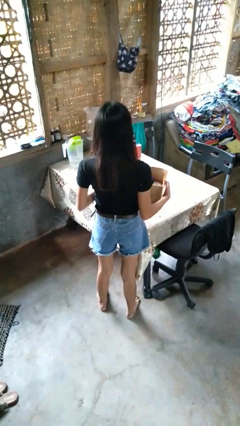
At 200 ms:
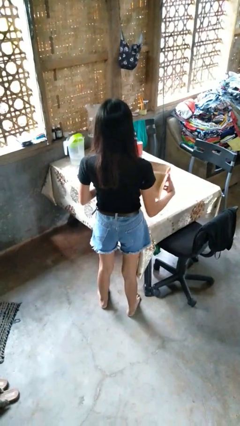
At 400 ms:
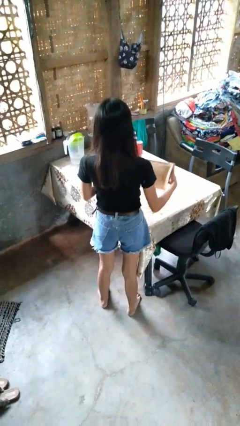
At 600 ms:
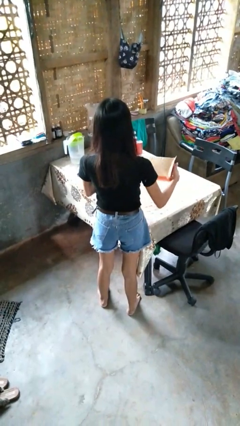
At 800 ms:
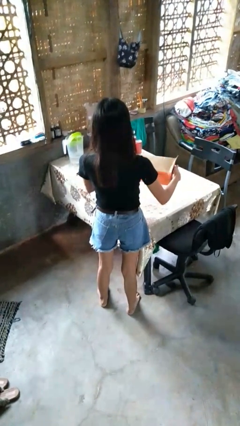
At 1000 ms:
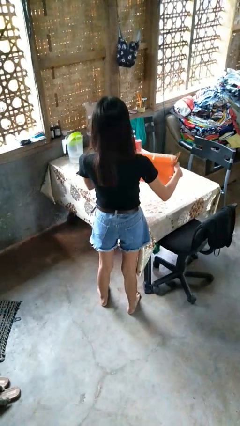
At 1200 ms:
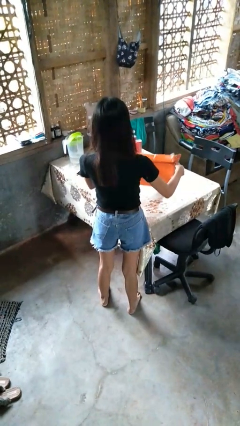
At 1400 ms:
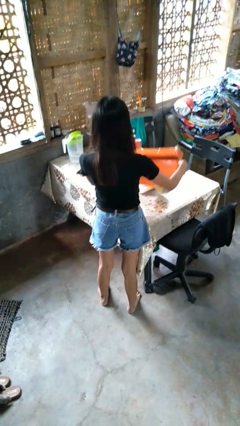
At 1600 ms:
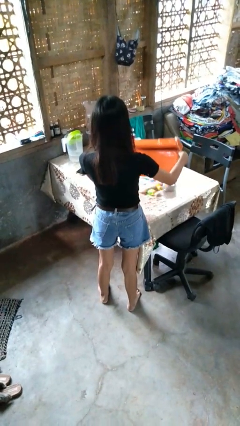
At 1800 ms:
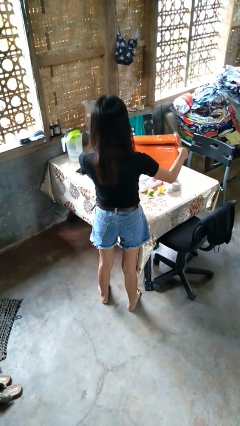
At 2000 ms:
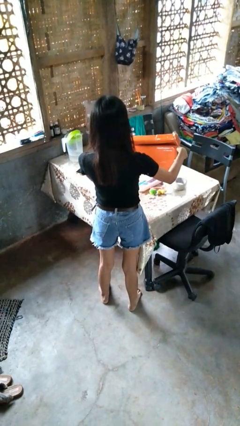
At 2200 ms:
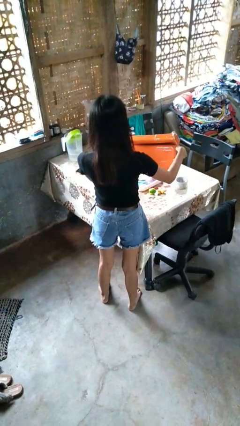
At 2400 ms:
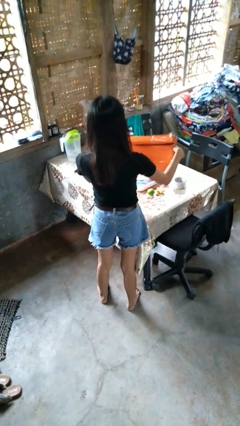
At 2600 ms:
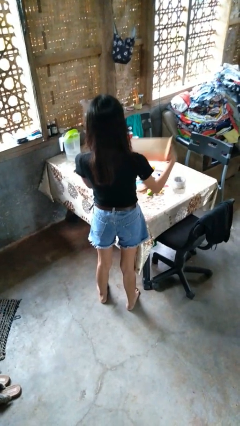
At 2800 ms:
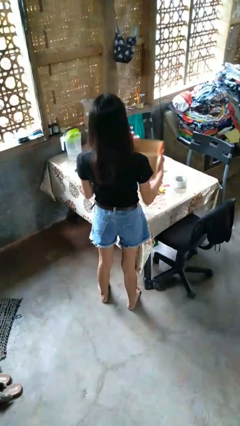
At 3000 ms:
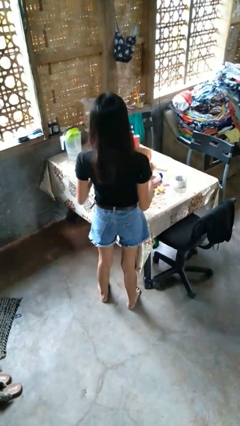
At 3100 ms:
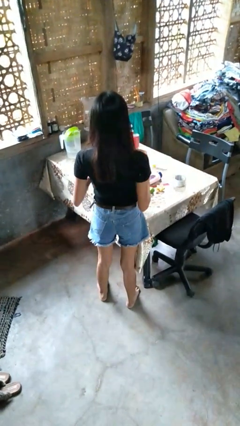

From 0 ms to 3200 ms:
person unloads box onto table

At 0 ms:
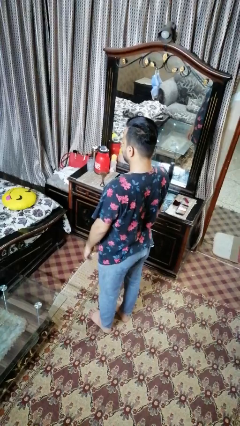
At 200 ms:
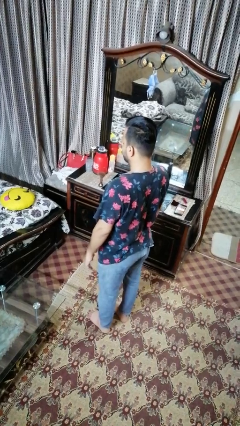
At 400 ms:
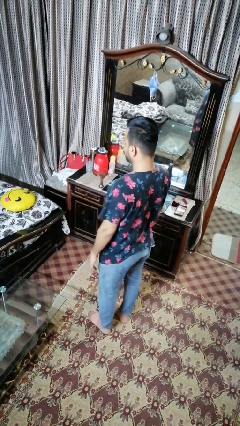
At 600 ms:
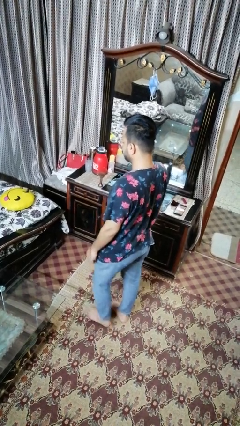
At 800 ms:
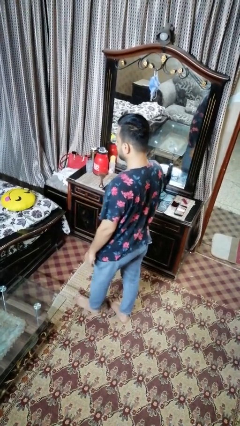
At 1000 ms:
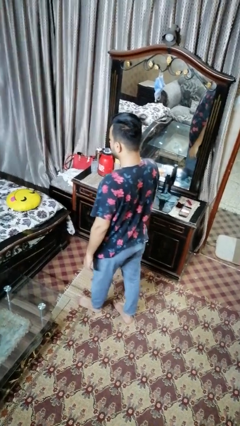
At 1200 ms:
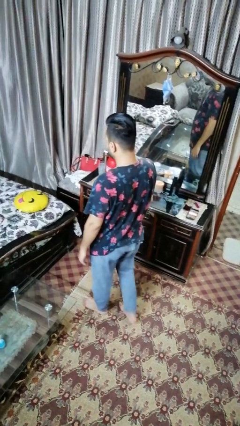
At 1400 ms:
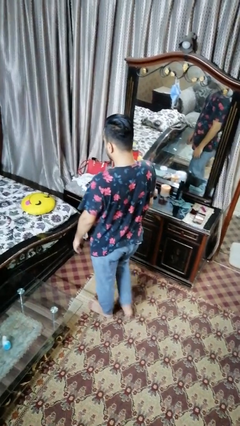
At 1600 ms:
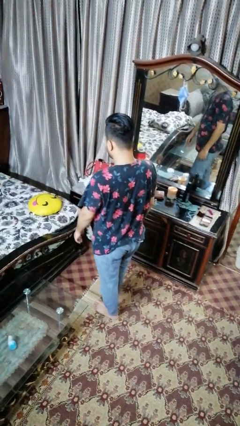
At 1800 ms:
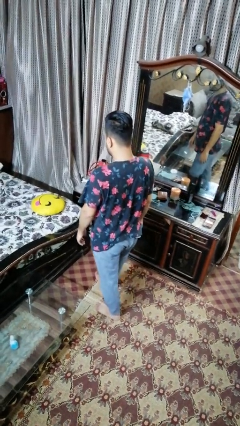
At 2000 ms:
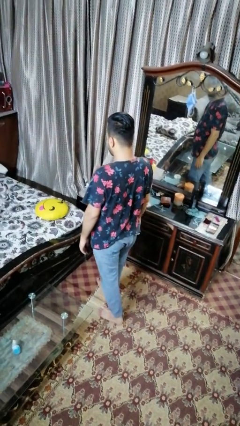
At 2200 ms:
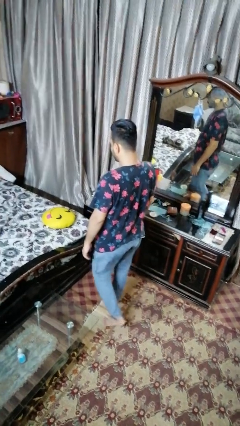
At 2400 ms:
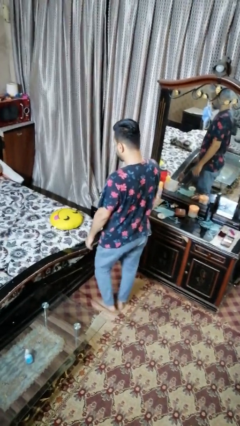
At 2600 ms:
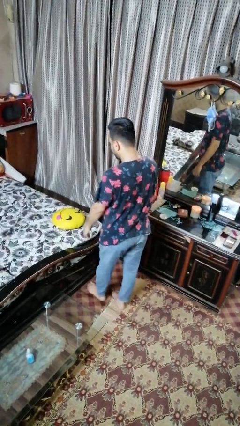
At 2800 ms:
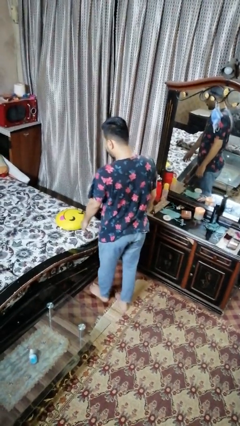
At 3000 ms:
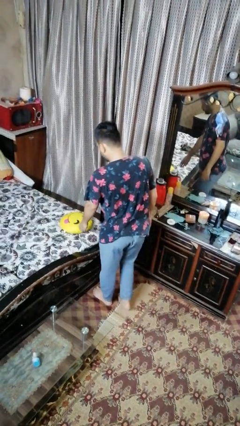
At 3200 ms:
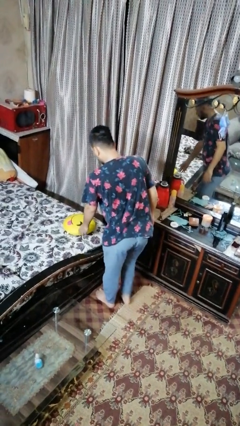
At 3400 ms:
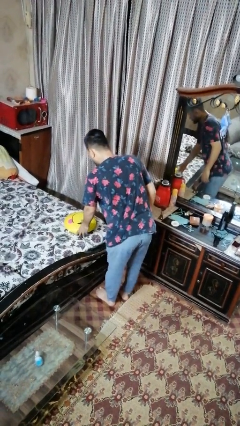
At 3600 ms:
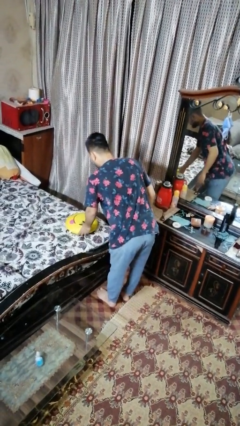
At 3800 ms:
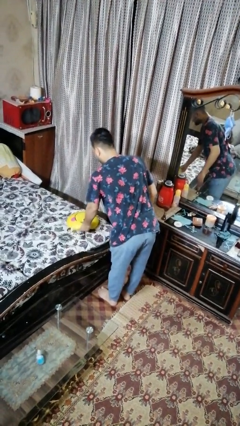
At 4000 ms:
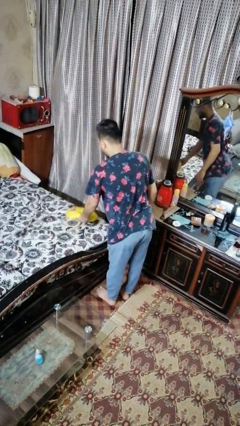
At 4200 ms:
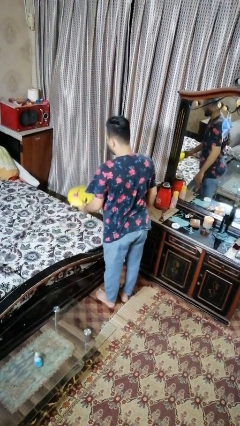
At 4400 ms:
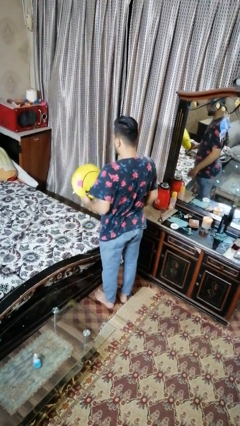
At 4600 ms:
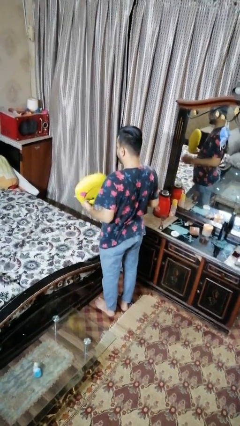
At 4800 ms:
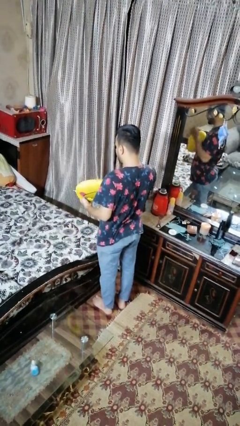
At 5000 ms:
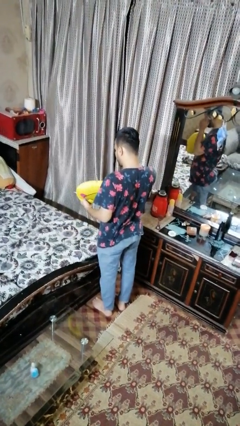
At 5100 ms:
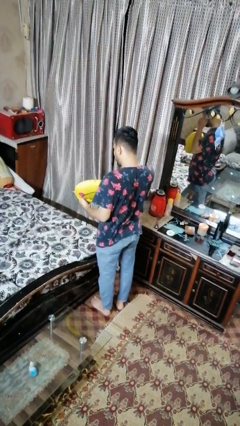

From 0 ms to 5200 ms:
person picks up object from bed

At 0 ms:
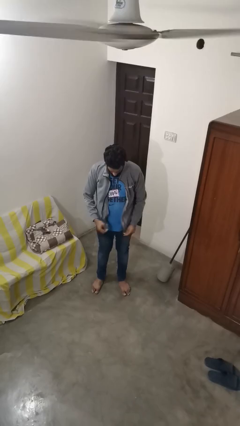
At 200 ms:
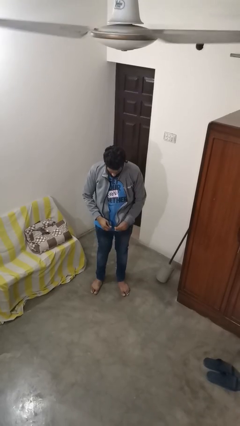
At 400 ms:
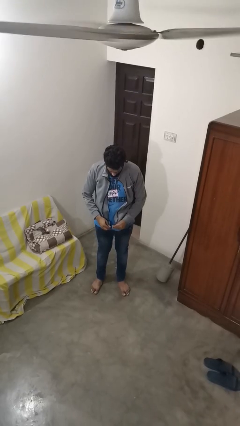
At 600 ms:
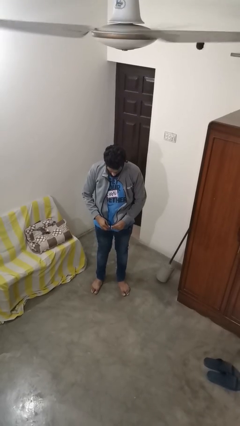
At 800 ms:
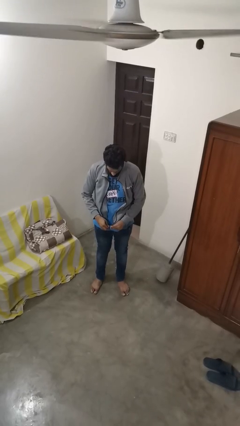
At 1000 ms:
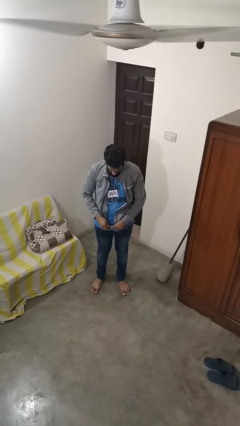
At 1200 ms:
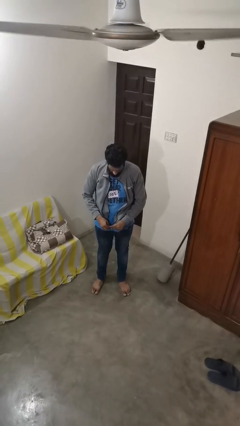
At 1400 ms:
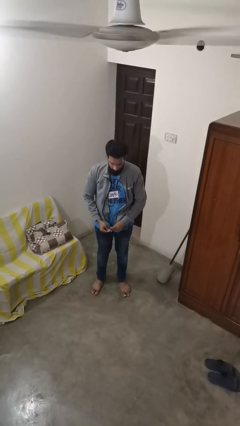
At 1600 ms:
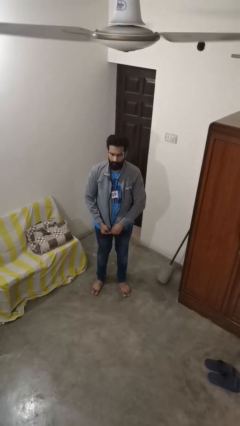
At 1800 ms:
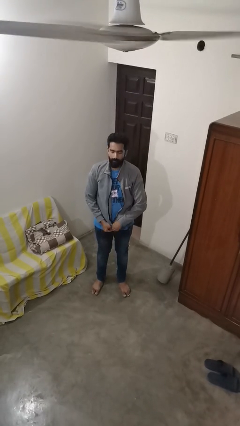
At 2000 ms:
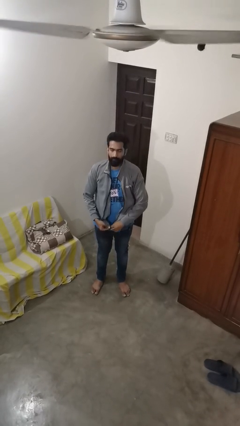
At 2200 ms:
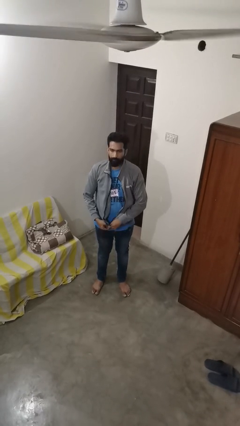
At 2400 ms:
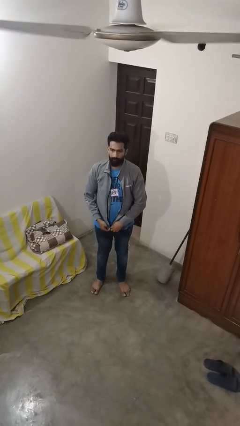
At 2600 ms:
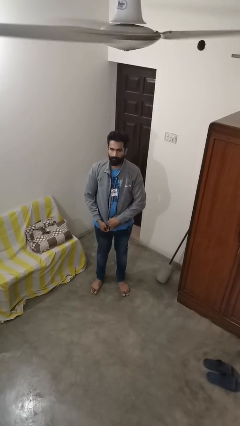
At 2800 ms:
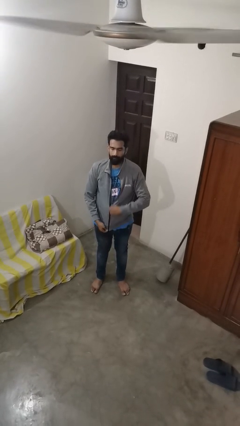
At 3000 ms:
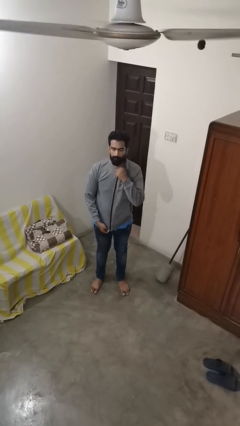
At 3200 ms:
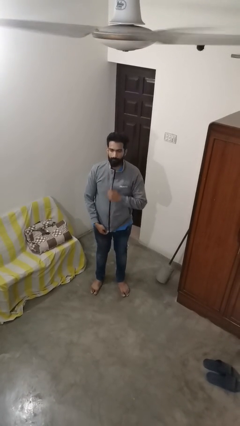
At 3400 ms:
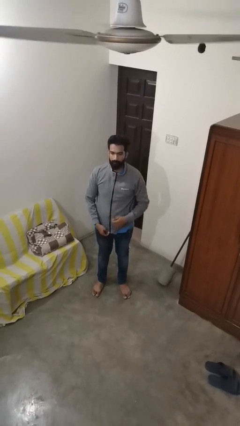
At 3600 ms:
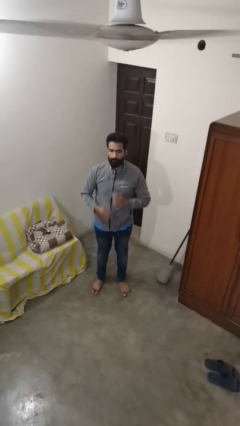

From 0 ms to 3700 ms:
person zips up jacket

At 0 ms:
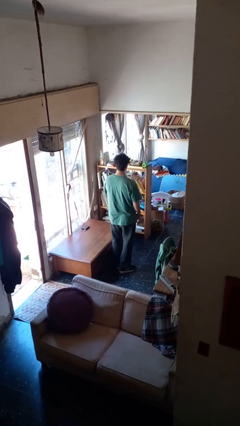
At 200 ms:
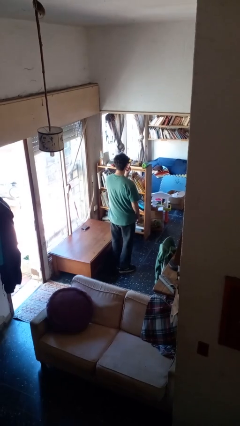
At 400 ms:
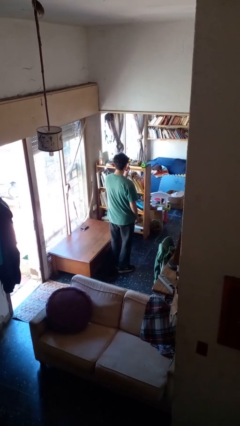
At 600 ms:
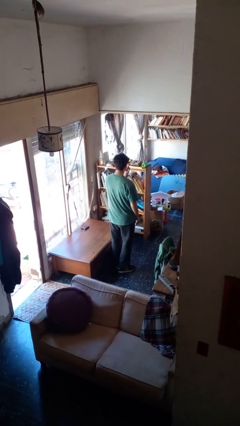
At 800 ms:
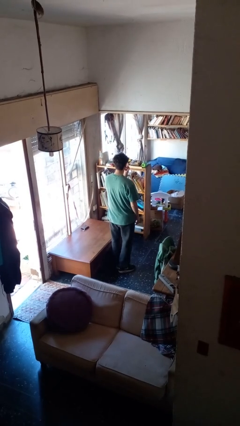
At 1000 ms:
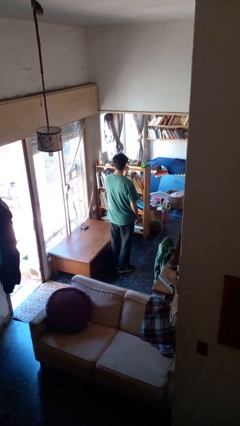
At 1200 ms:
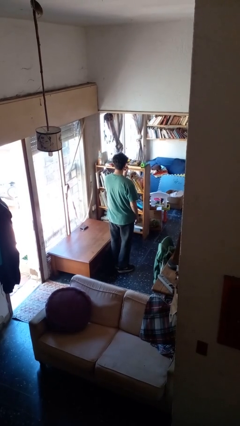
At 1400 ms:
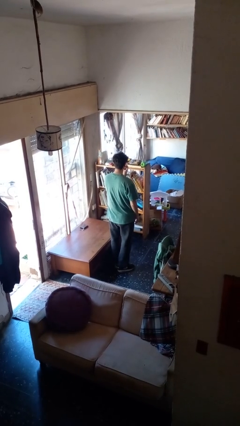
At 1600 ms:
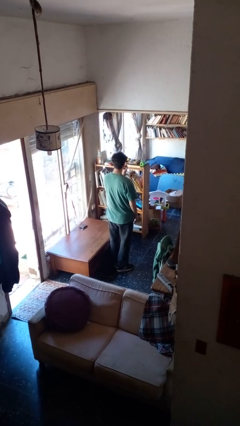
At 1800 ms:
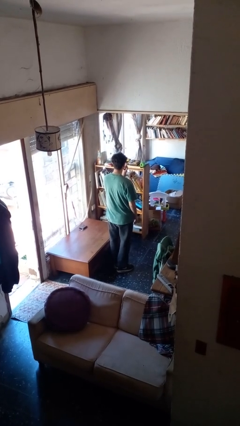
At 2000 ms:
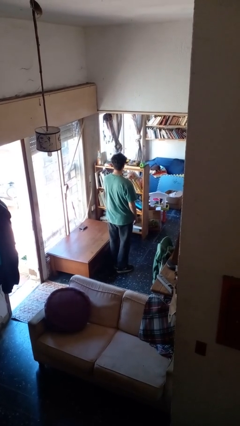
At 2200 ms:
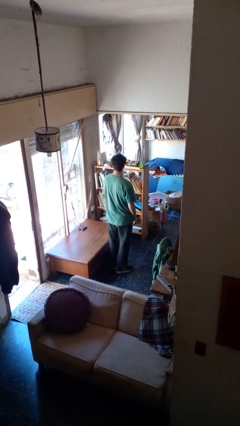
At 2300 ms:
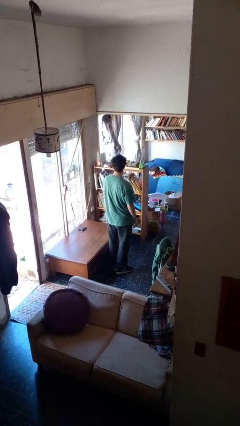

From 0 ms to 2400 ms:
person gestures watch closely

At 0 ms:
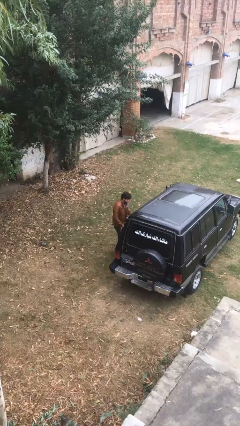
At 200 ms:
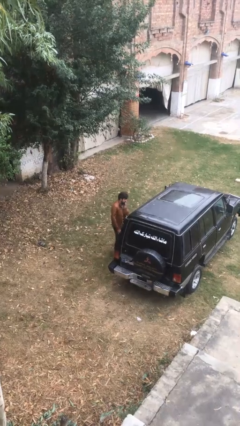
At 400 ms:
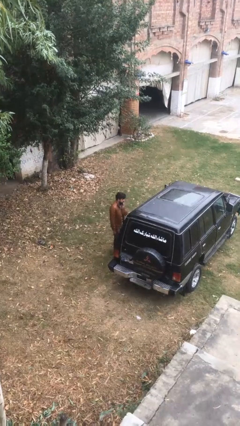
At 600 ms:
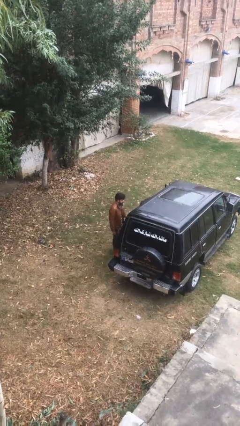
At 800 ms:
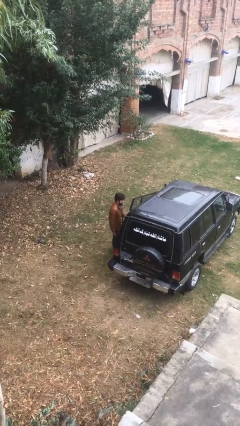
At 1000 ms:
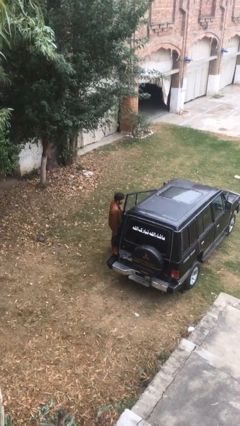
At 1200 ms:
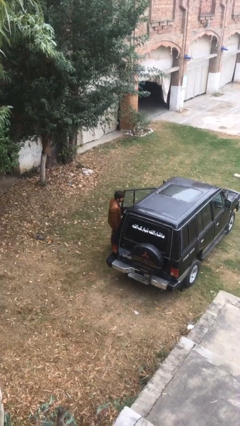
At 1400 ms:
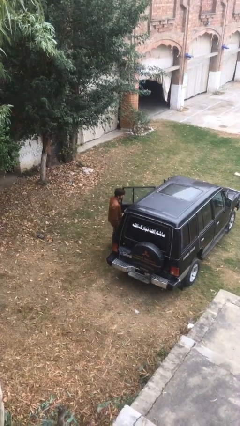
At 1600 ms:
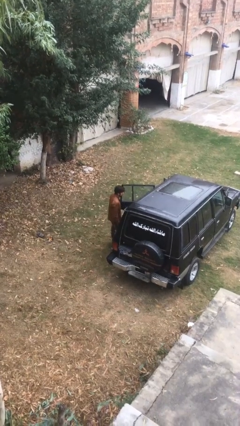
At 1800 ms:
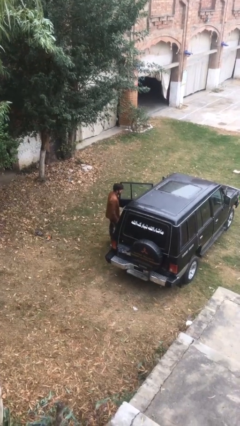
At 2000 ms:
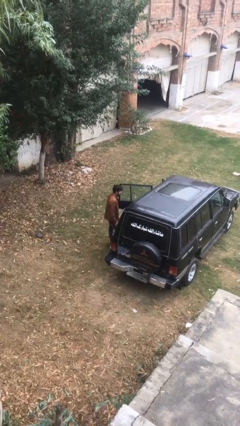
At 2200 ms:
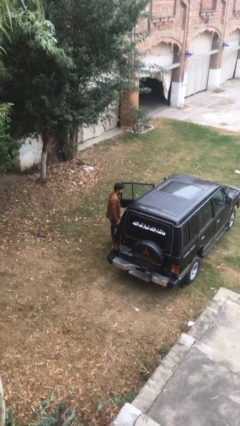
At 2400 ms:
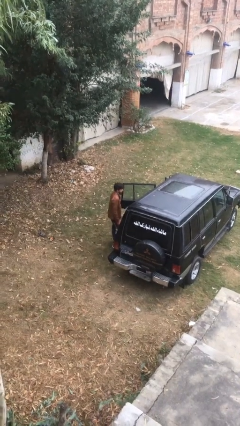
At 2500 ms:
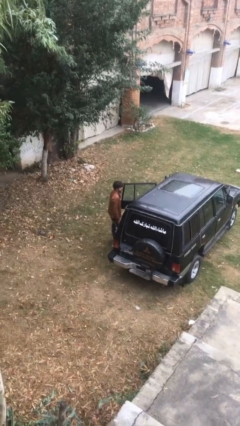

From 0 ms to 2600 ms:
person opens car door

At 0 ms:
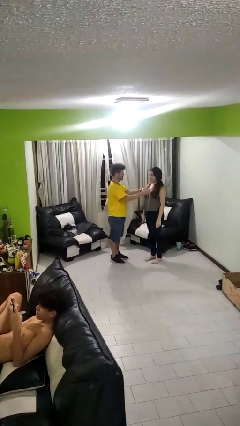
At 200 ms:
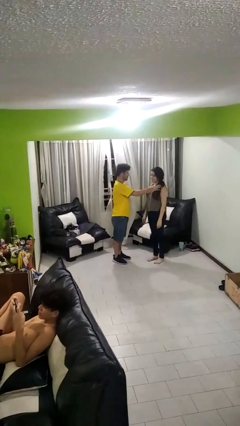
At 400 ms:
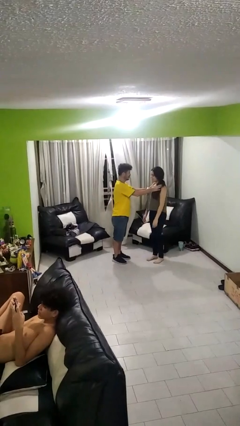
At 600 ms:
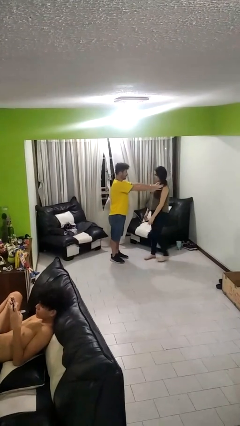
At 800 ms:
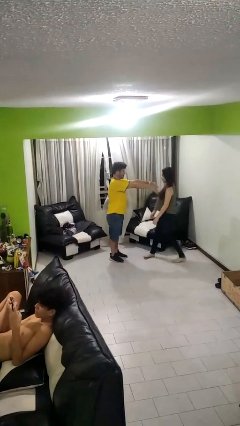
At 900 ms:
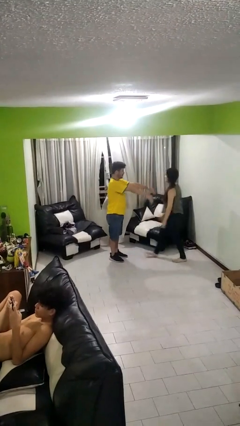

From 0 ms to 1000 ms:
person shoves person
